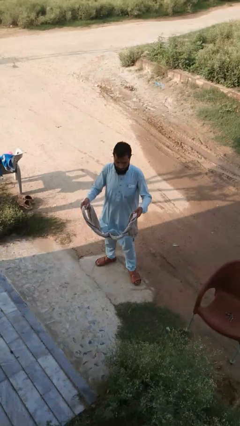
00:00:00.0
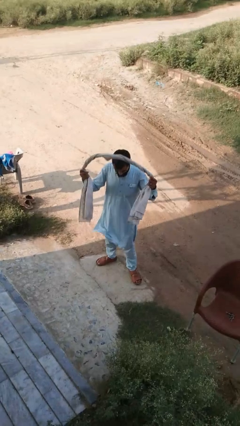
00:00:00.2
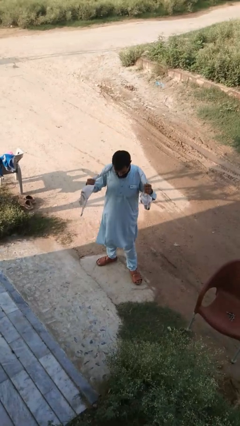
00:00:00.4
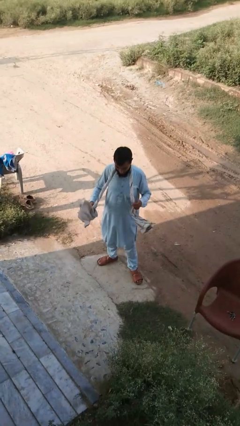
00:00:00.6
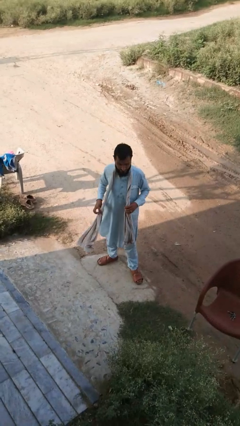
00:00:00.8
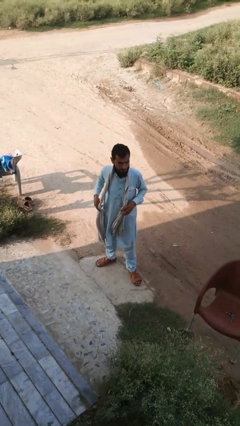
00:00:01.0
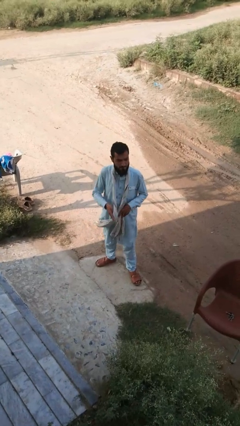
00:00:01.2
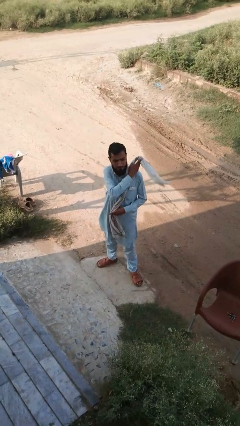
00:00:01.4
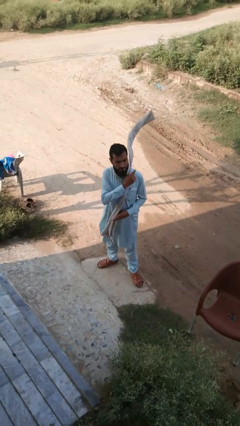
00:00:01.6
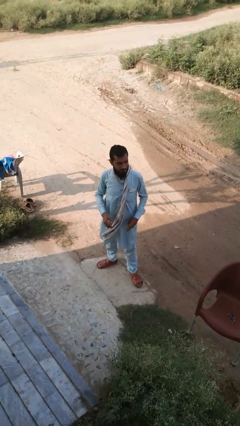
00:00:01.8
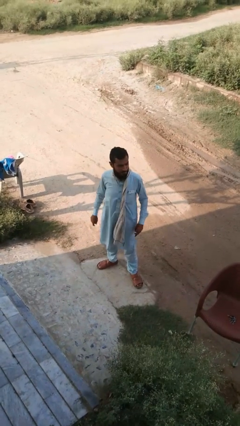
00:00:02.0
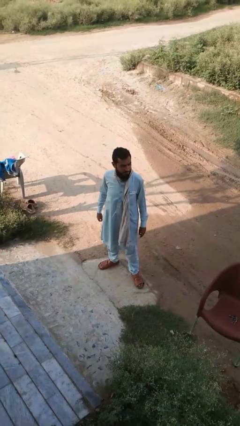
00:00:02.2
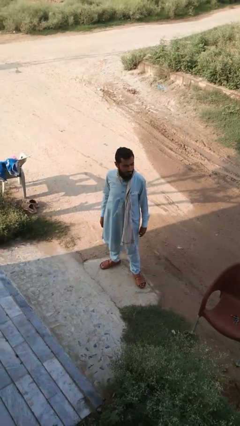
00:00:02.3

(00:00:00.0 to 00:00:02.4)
person puts on scarf

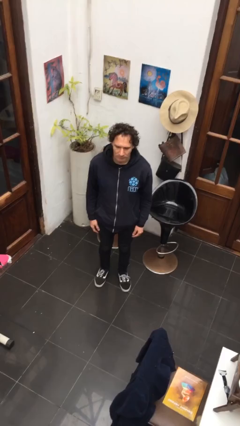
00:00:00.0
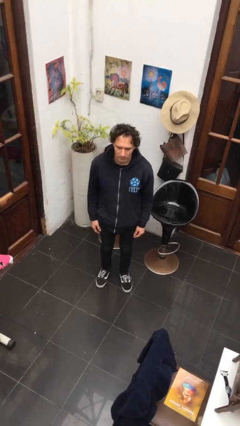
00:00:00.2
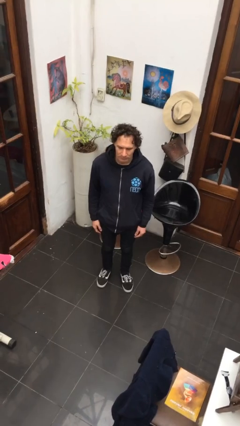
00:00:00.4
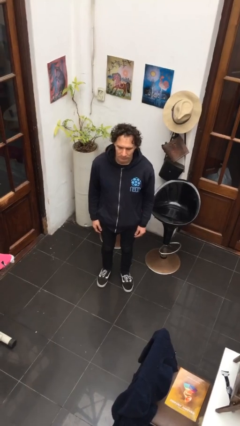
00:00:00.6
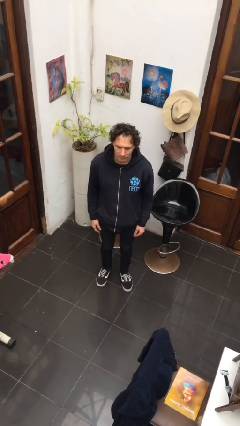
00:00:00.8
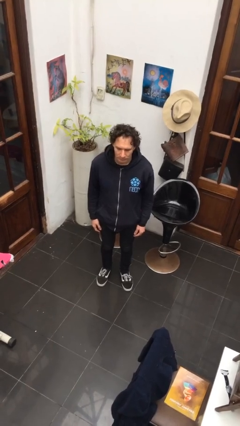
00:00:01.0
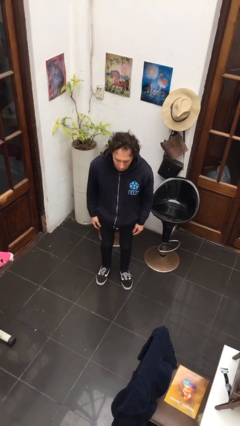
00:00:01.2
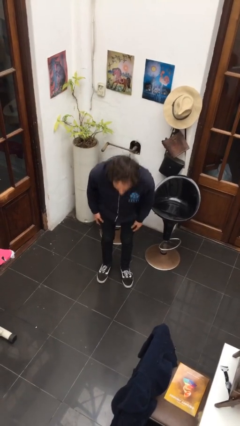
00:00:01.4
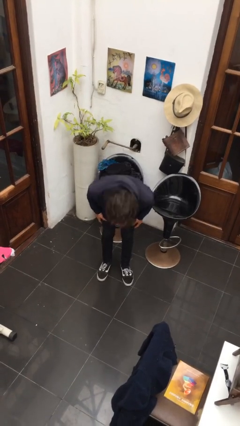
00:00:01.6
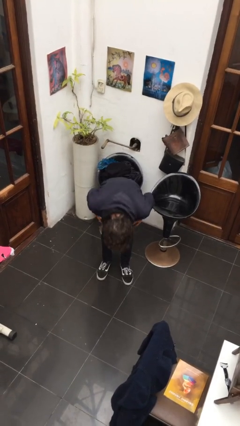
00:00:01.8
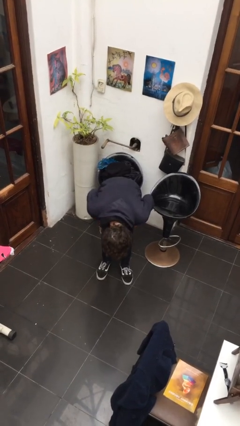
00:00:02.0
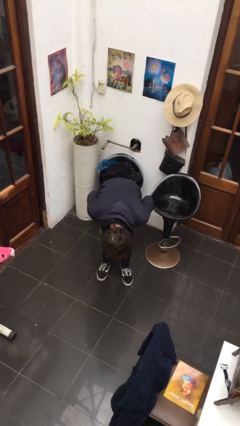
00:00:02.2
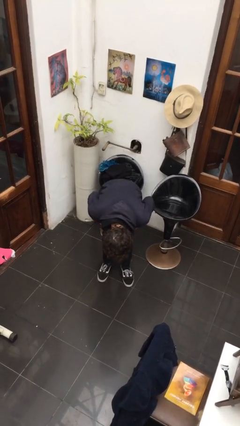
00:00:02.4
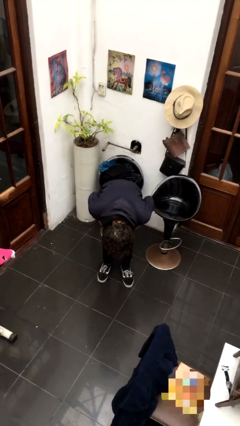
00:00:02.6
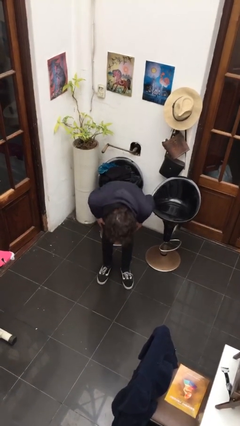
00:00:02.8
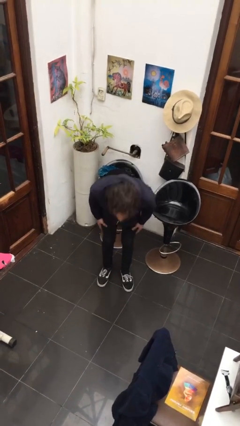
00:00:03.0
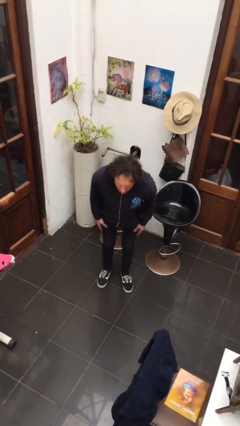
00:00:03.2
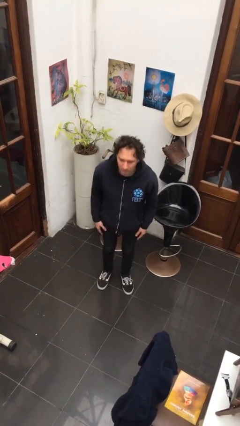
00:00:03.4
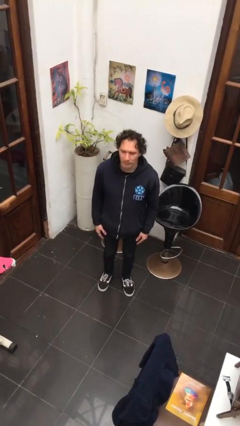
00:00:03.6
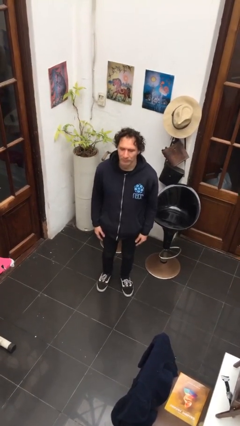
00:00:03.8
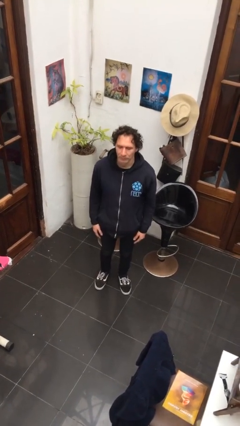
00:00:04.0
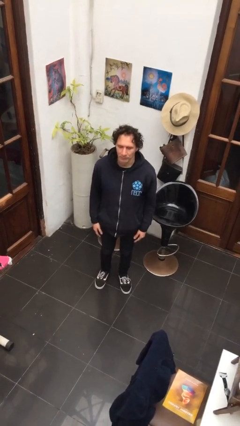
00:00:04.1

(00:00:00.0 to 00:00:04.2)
person bows

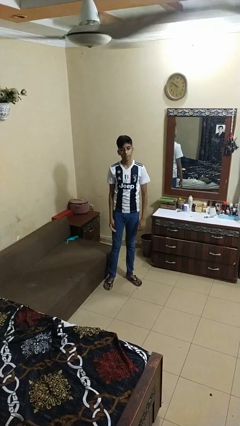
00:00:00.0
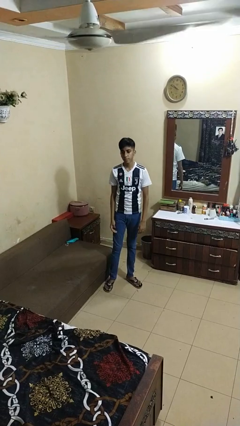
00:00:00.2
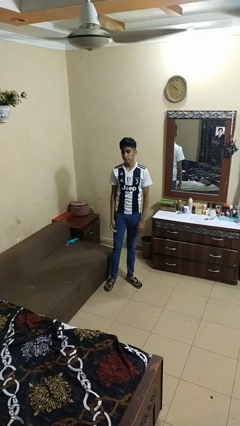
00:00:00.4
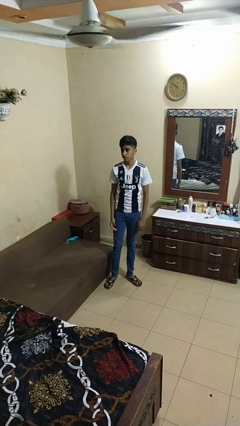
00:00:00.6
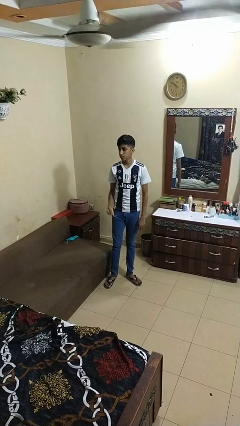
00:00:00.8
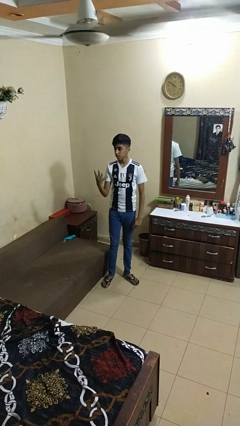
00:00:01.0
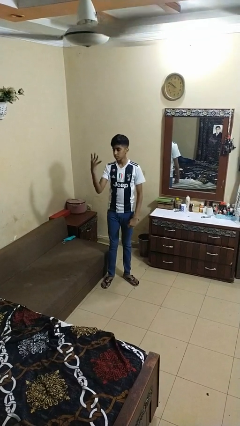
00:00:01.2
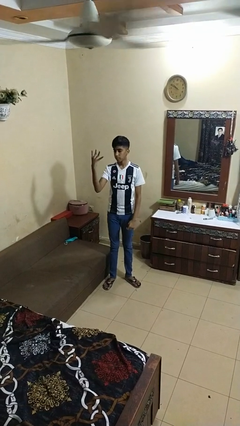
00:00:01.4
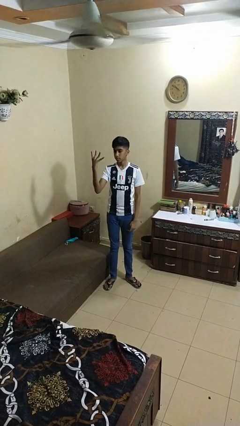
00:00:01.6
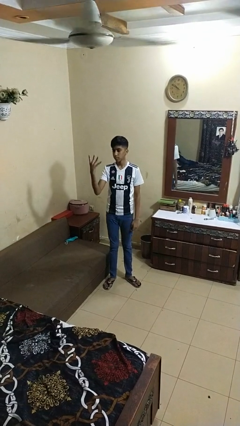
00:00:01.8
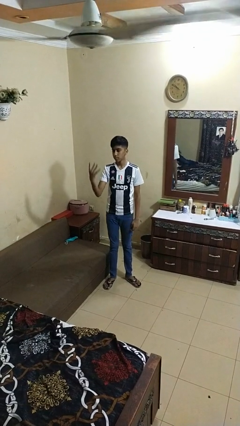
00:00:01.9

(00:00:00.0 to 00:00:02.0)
person gestures number four

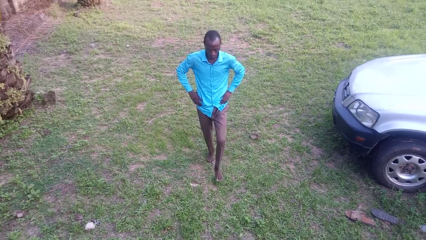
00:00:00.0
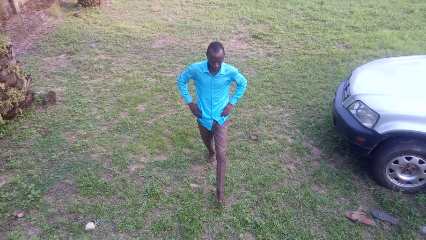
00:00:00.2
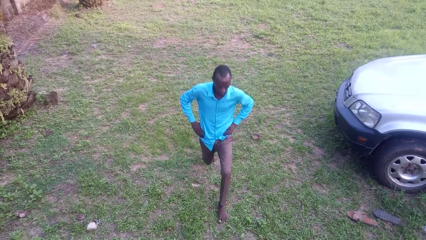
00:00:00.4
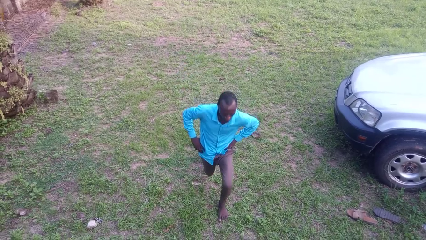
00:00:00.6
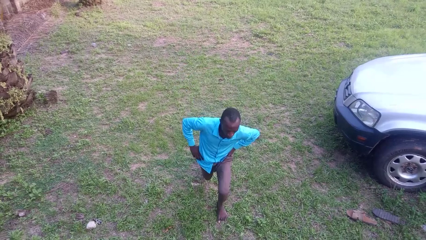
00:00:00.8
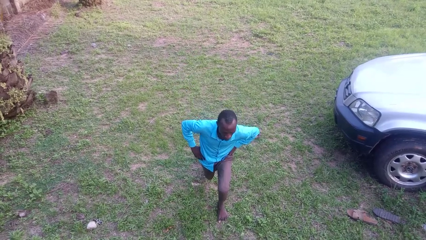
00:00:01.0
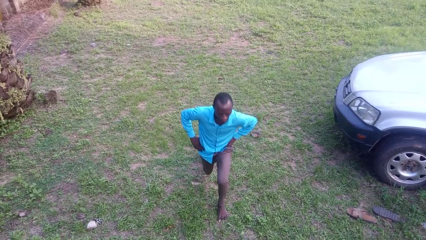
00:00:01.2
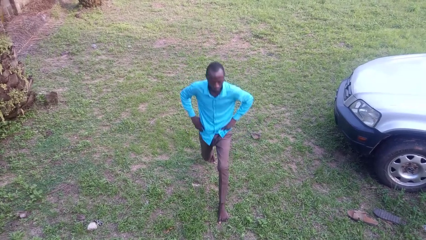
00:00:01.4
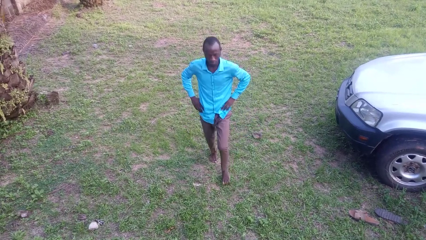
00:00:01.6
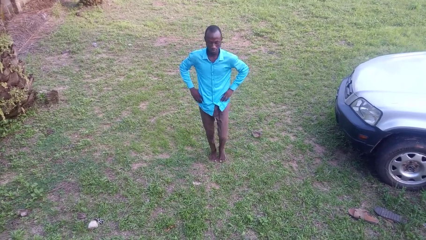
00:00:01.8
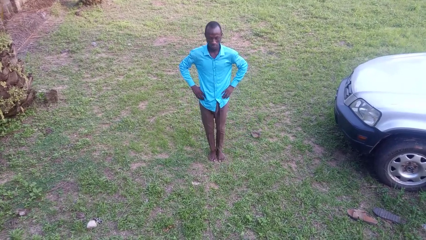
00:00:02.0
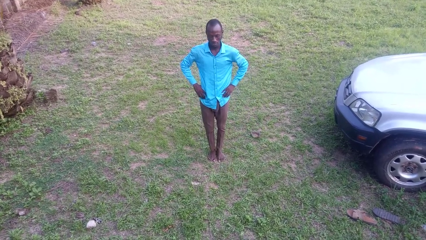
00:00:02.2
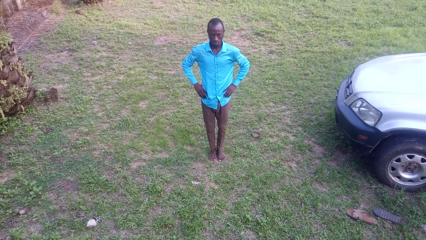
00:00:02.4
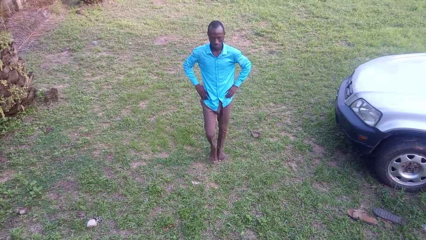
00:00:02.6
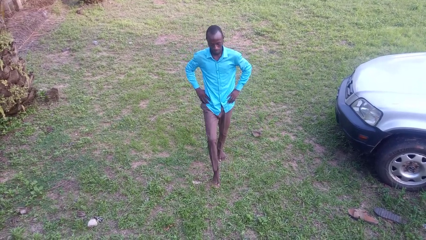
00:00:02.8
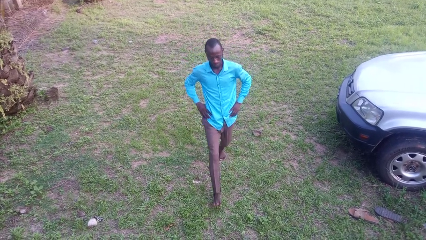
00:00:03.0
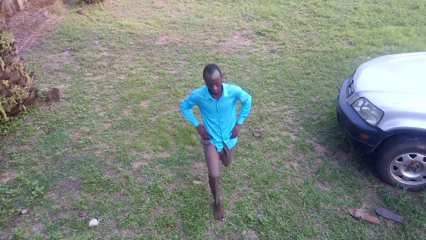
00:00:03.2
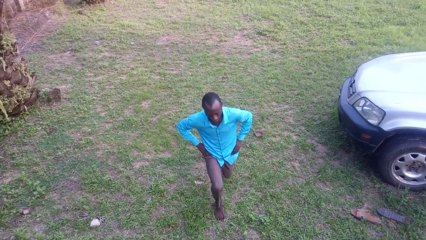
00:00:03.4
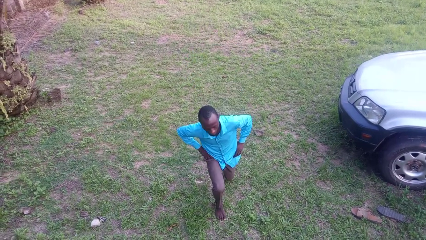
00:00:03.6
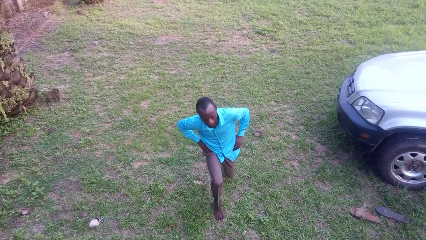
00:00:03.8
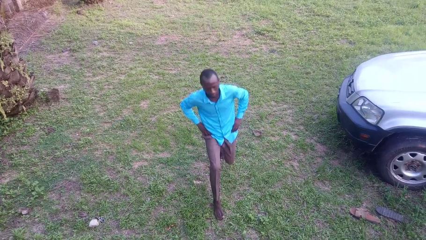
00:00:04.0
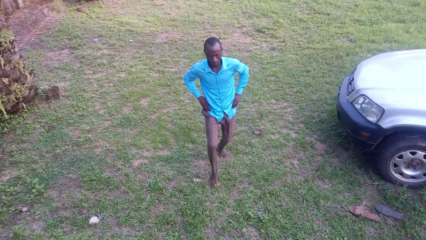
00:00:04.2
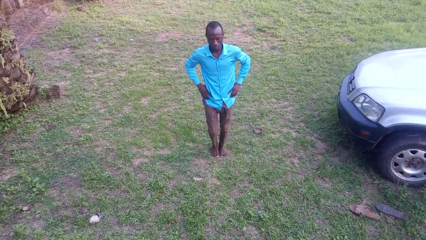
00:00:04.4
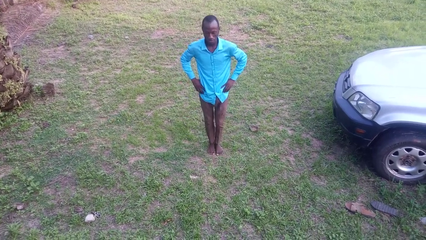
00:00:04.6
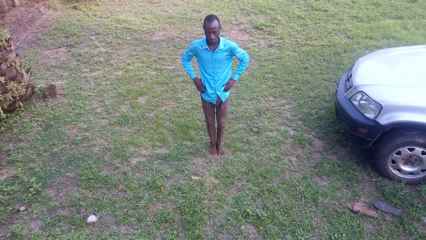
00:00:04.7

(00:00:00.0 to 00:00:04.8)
person exercises with lunges

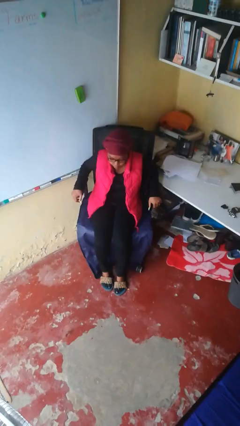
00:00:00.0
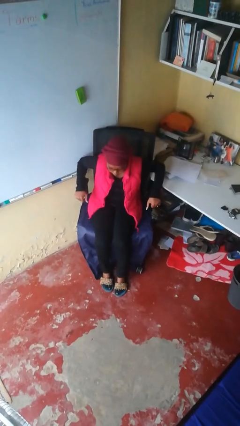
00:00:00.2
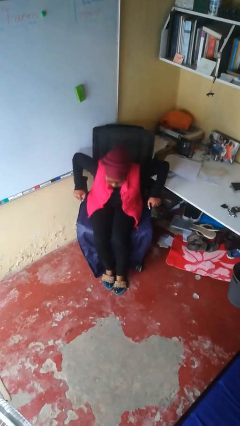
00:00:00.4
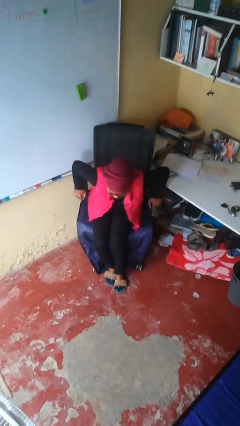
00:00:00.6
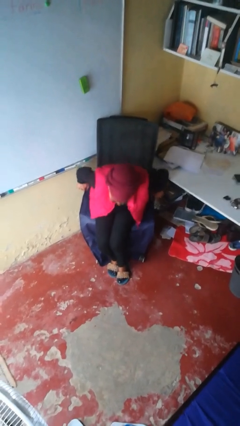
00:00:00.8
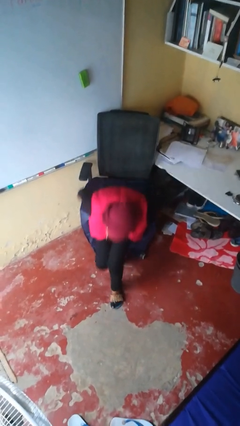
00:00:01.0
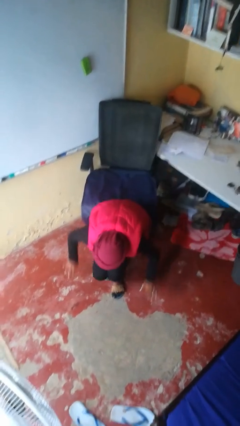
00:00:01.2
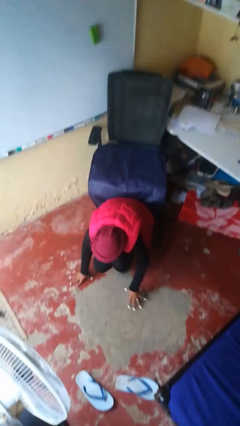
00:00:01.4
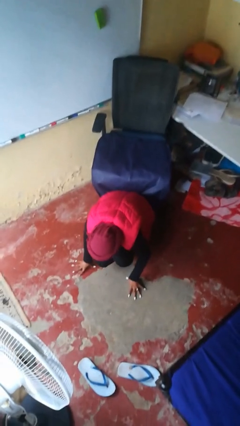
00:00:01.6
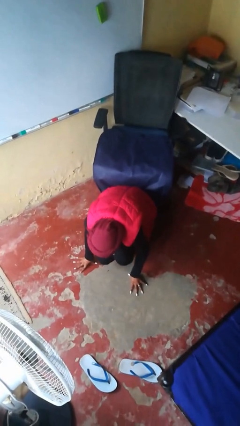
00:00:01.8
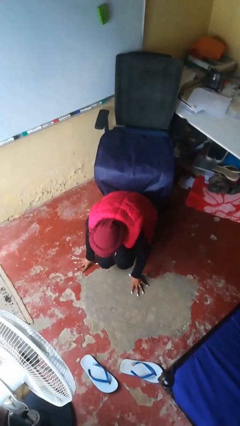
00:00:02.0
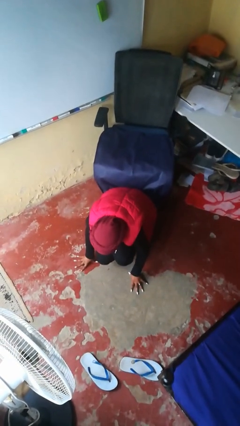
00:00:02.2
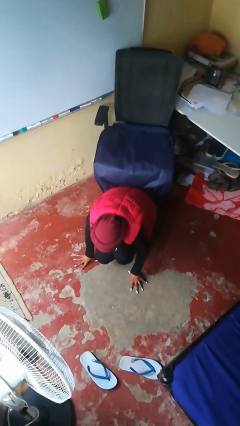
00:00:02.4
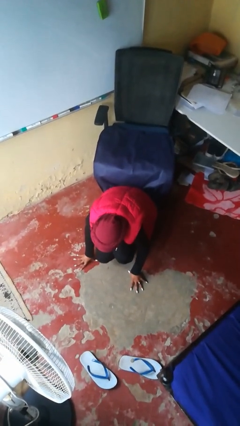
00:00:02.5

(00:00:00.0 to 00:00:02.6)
person falls from chair

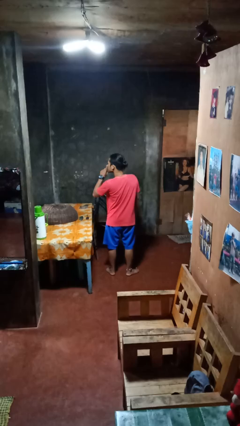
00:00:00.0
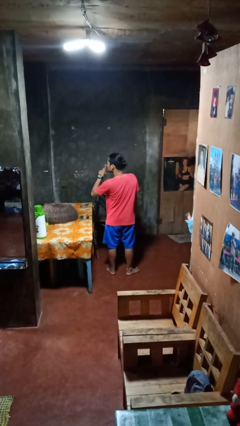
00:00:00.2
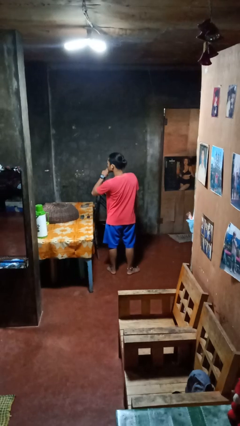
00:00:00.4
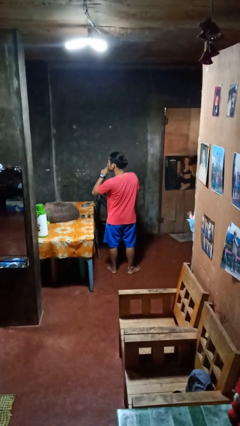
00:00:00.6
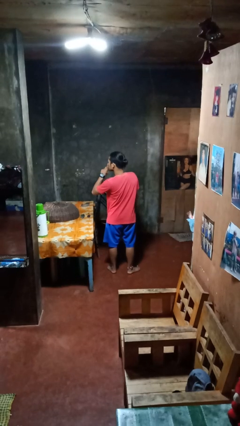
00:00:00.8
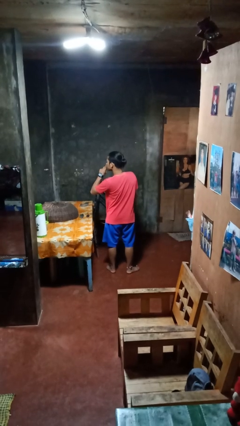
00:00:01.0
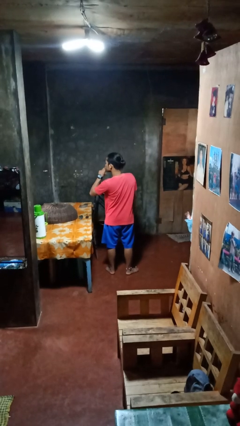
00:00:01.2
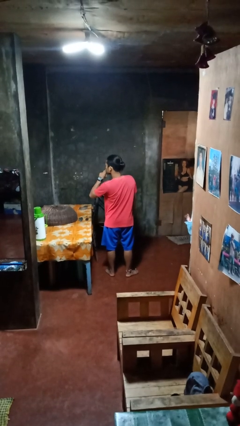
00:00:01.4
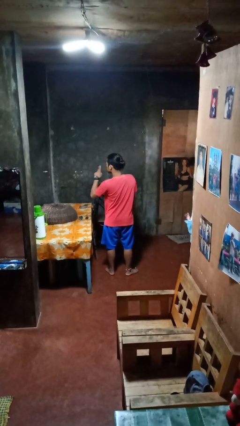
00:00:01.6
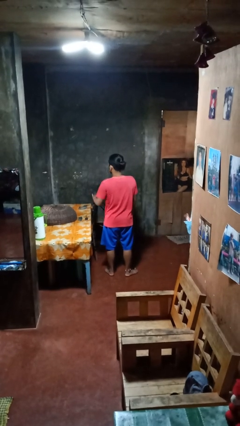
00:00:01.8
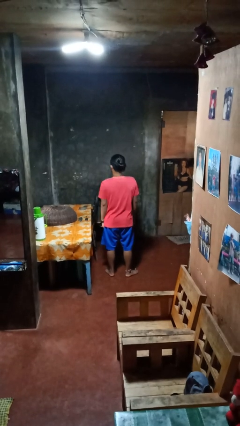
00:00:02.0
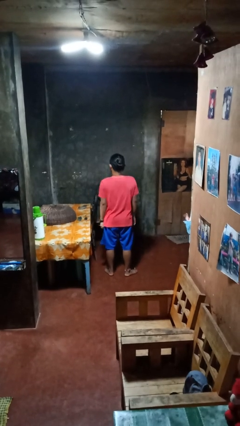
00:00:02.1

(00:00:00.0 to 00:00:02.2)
person gestures be quiet
